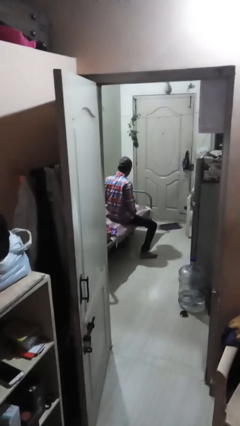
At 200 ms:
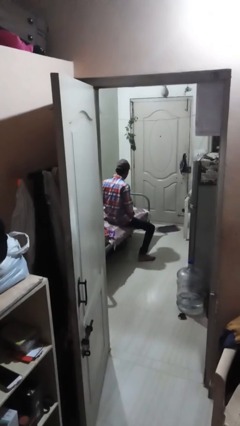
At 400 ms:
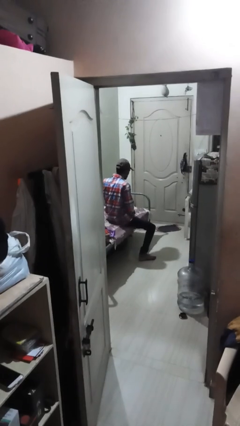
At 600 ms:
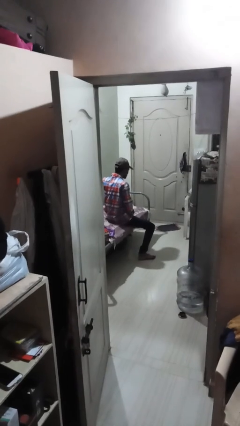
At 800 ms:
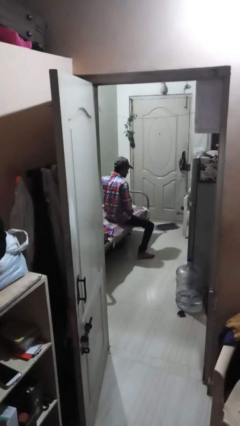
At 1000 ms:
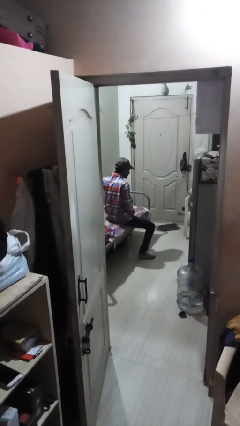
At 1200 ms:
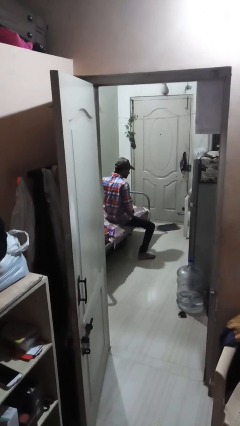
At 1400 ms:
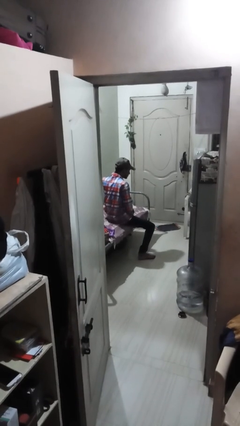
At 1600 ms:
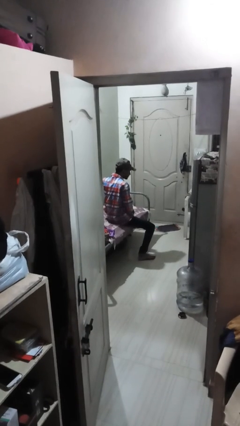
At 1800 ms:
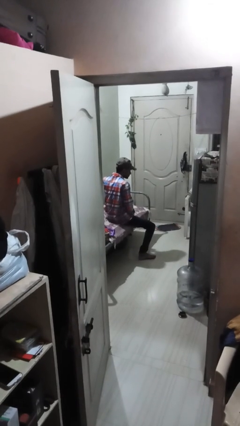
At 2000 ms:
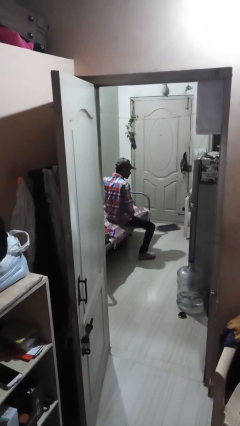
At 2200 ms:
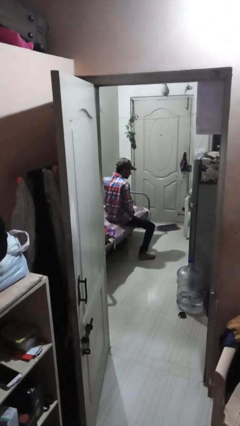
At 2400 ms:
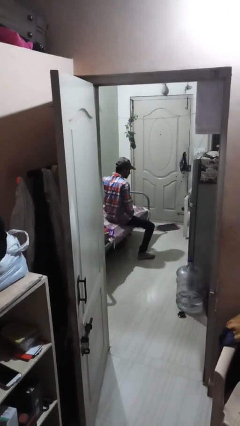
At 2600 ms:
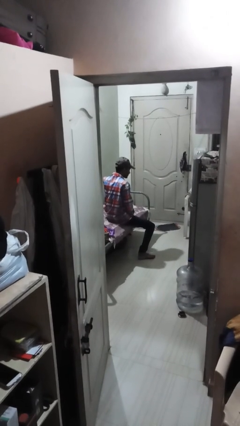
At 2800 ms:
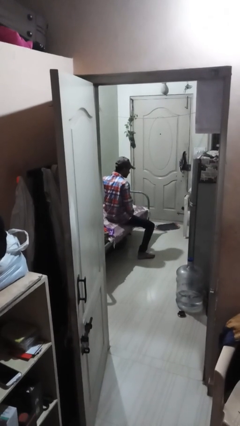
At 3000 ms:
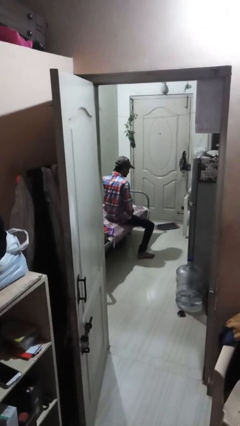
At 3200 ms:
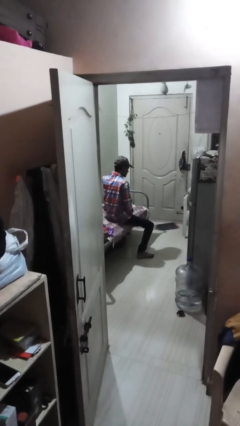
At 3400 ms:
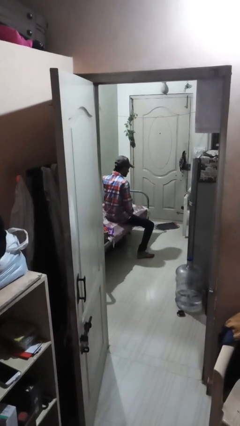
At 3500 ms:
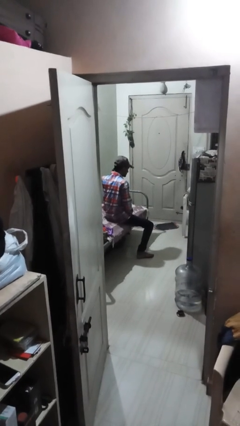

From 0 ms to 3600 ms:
person touches earlobe

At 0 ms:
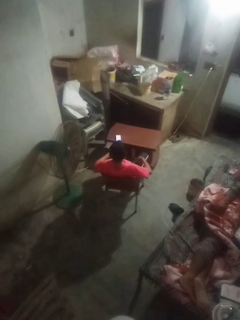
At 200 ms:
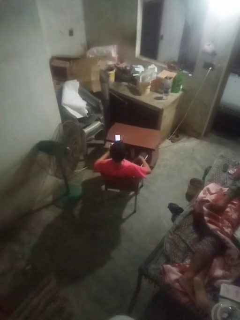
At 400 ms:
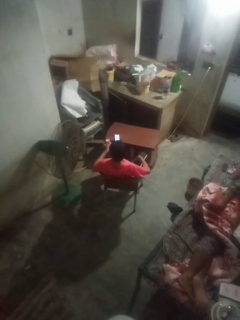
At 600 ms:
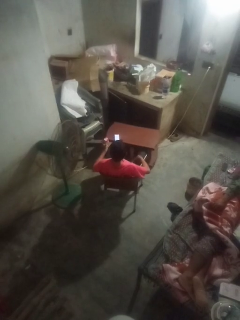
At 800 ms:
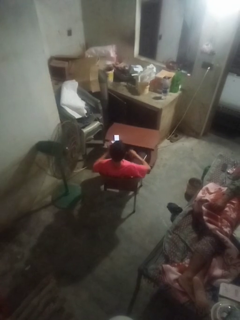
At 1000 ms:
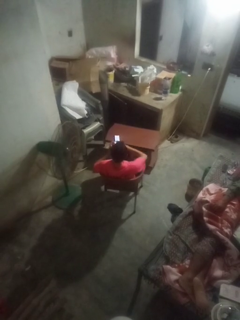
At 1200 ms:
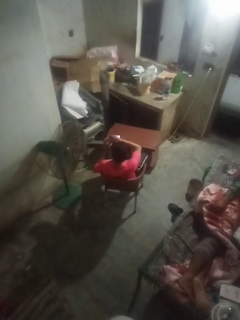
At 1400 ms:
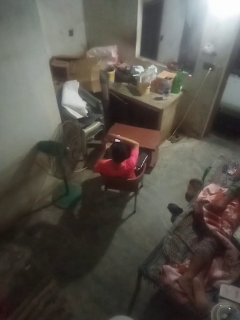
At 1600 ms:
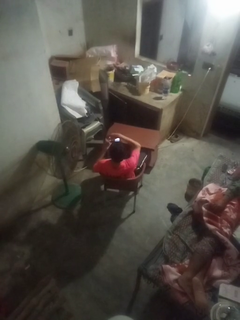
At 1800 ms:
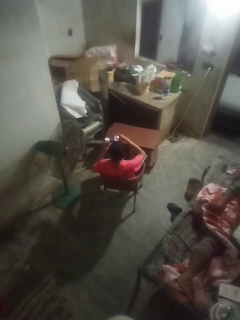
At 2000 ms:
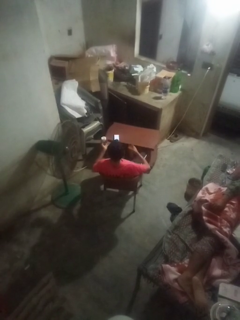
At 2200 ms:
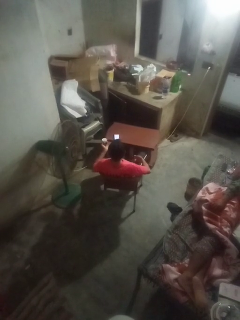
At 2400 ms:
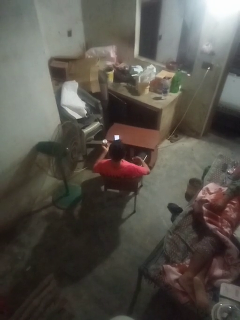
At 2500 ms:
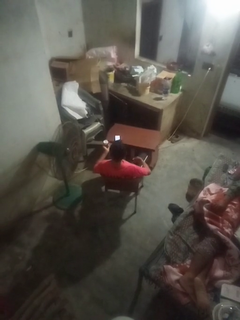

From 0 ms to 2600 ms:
person opens jar

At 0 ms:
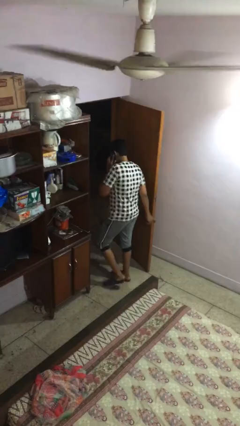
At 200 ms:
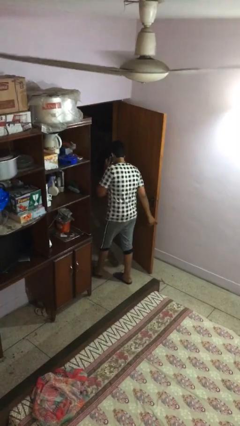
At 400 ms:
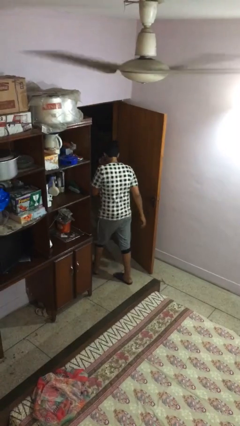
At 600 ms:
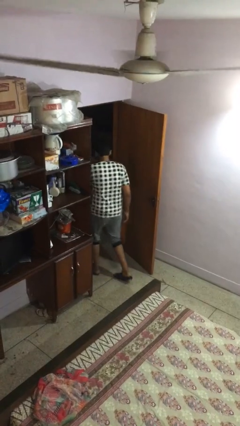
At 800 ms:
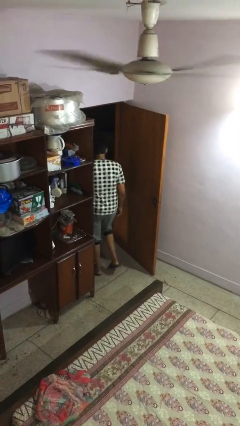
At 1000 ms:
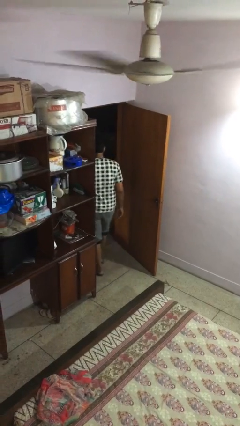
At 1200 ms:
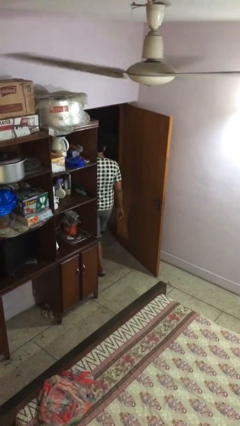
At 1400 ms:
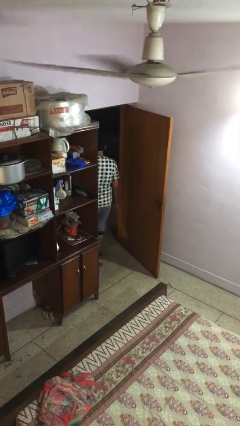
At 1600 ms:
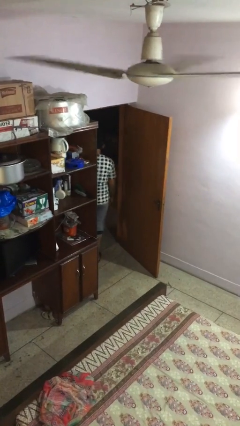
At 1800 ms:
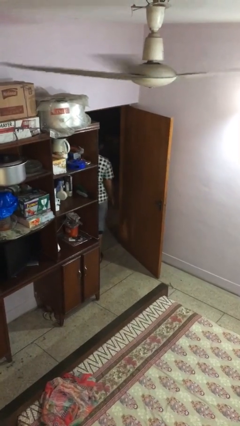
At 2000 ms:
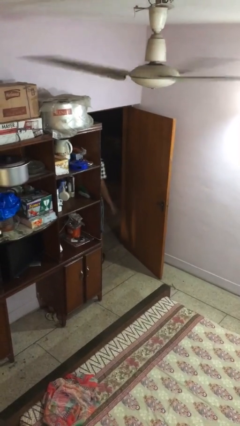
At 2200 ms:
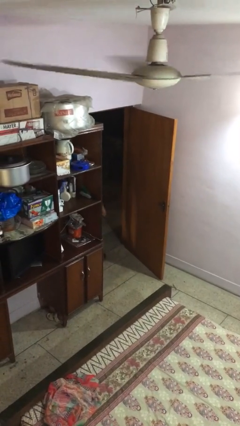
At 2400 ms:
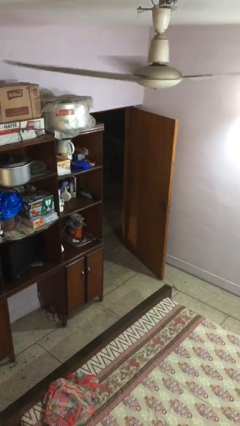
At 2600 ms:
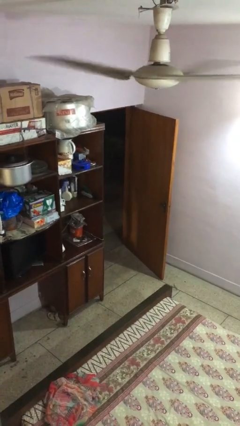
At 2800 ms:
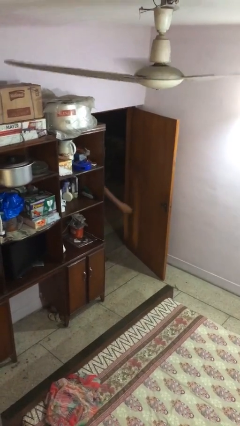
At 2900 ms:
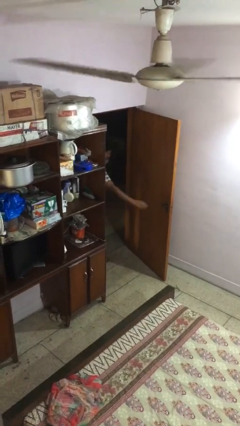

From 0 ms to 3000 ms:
person exits scene through structure

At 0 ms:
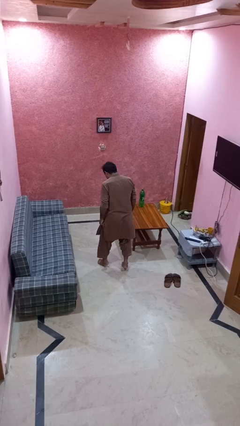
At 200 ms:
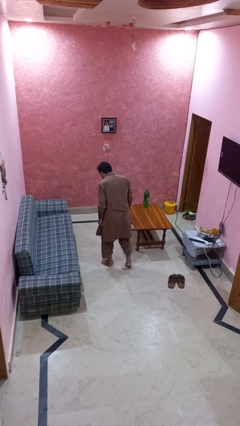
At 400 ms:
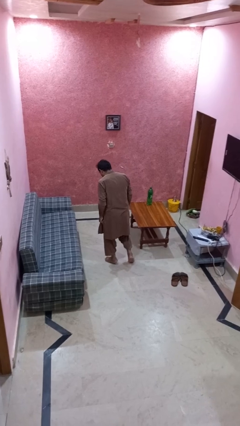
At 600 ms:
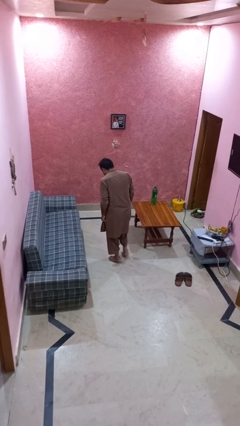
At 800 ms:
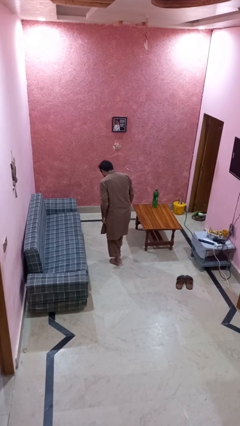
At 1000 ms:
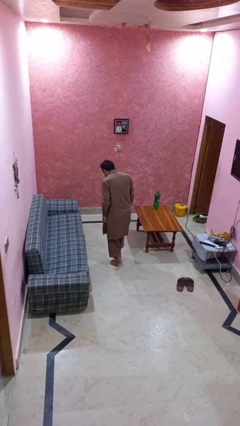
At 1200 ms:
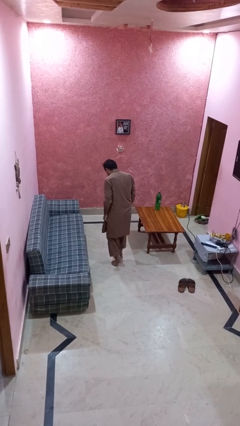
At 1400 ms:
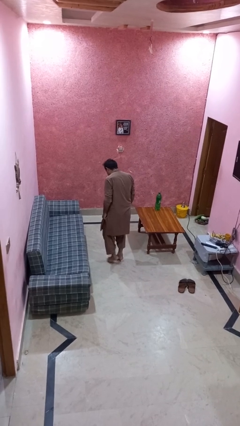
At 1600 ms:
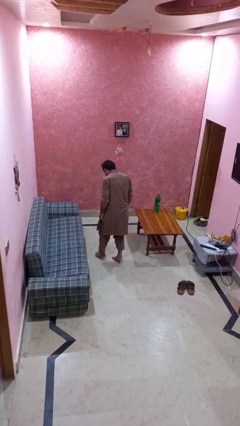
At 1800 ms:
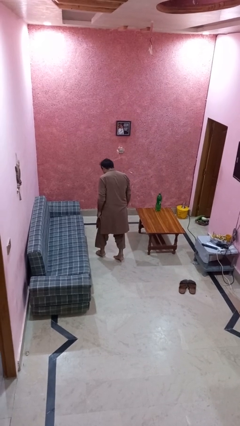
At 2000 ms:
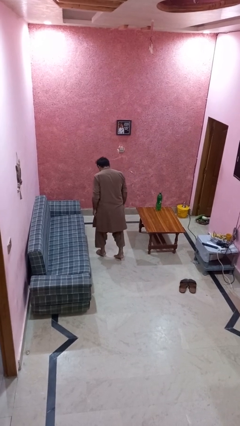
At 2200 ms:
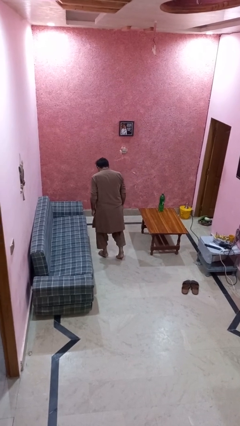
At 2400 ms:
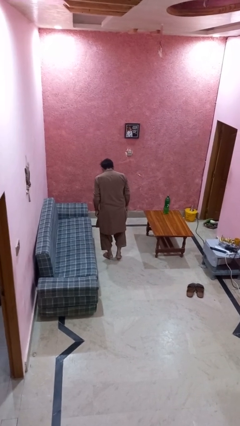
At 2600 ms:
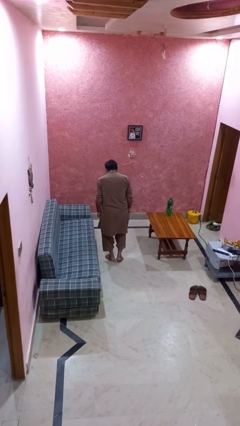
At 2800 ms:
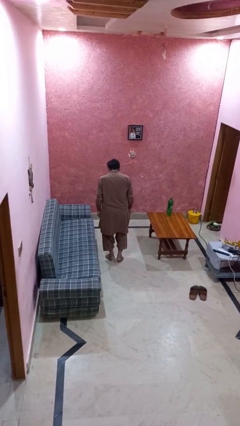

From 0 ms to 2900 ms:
person walks tiptoe

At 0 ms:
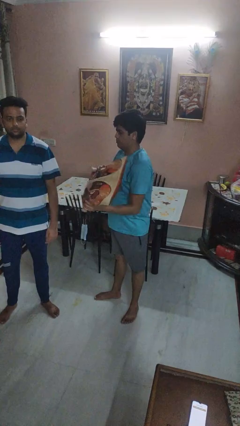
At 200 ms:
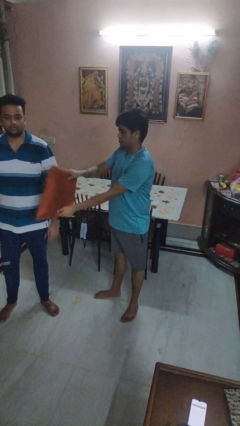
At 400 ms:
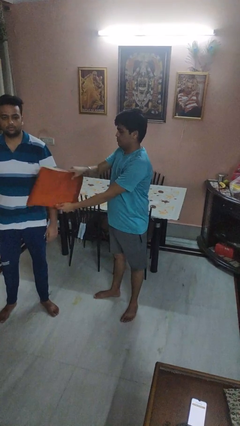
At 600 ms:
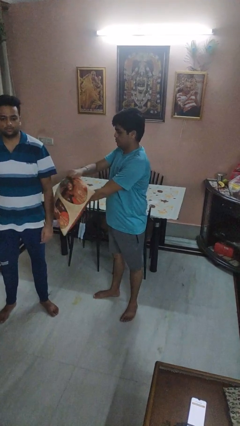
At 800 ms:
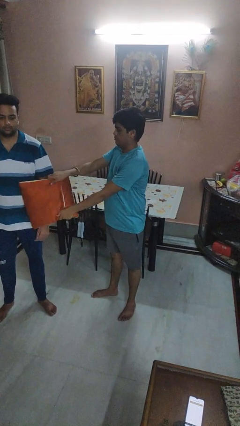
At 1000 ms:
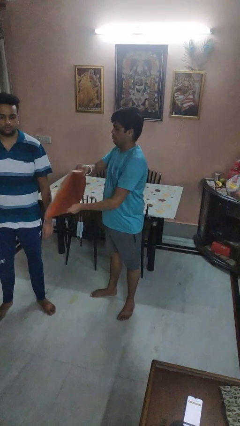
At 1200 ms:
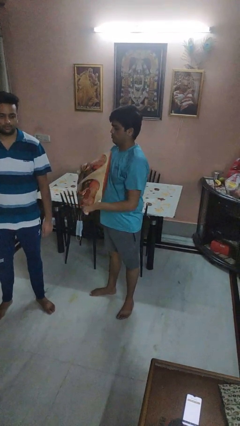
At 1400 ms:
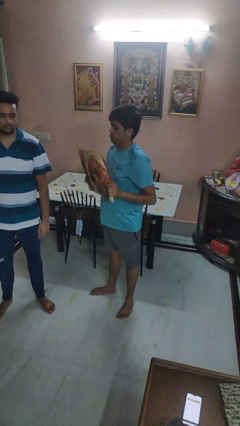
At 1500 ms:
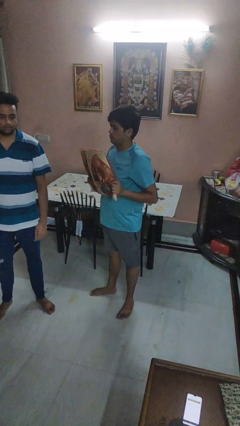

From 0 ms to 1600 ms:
person hits person with pillow

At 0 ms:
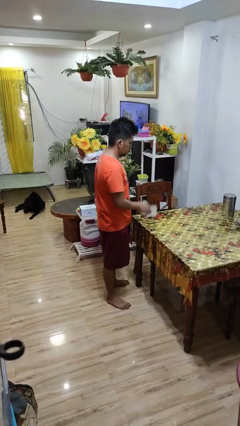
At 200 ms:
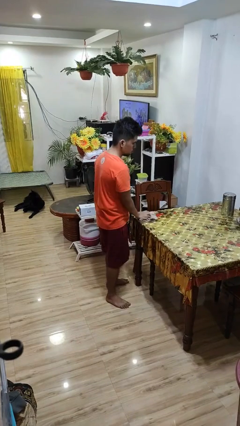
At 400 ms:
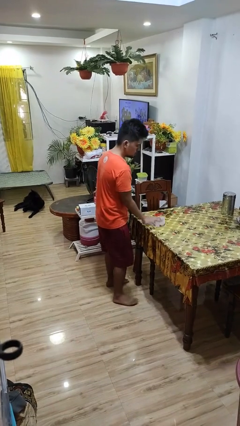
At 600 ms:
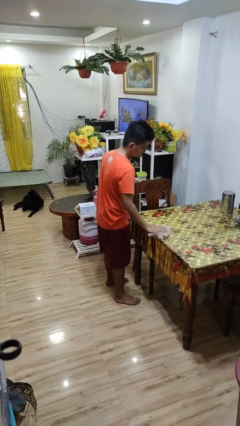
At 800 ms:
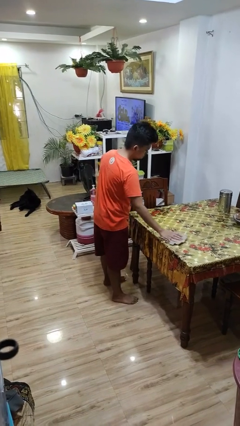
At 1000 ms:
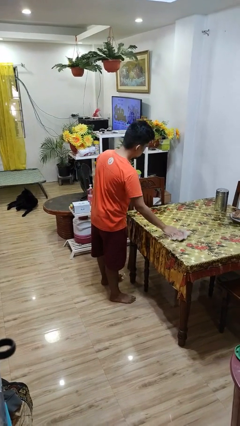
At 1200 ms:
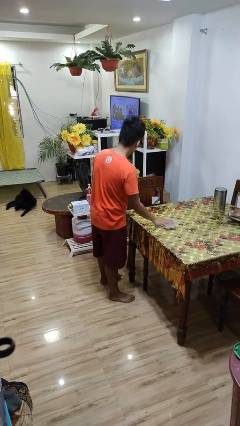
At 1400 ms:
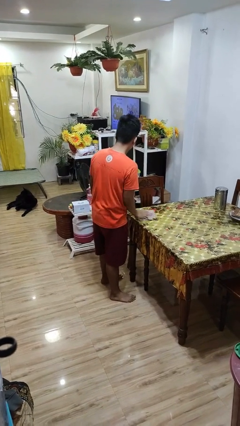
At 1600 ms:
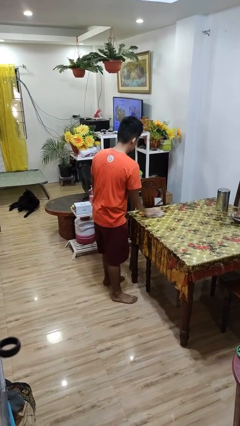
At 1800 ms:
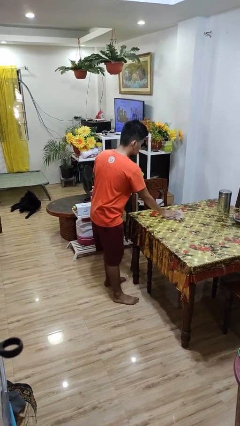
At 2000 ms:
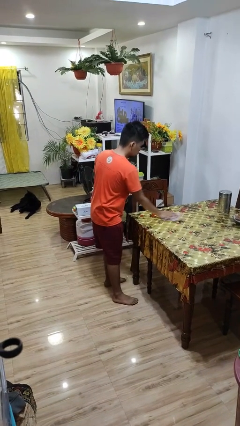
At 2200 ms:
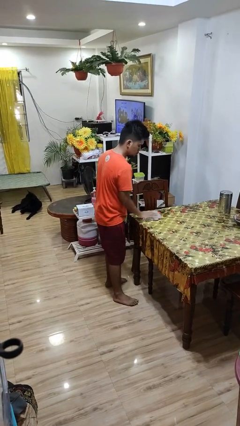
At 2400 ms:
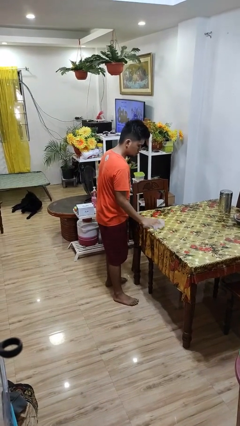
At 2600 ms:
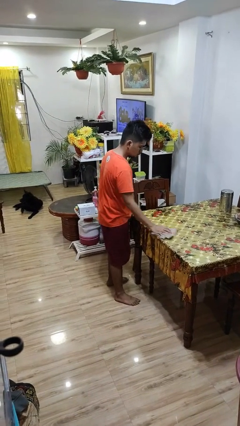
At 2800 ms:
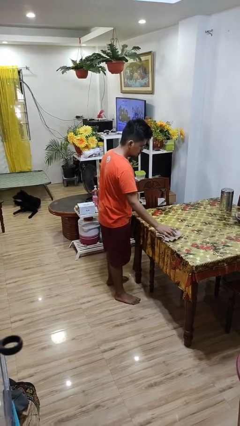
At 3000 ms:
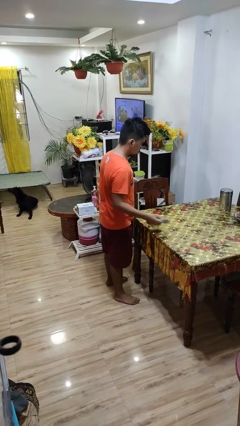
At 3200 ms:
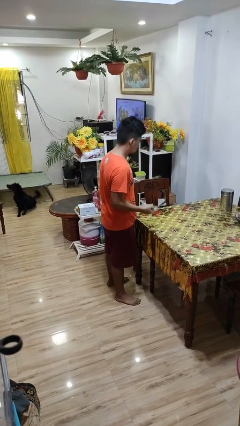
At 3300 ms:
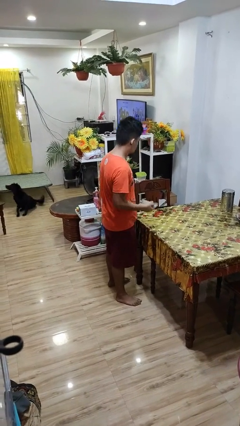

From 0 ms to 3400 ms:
person cleans table with rag

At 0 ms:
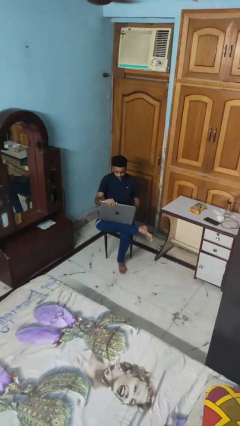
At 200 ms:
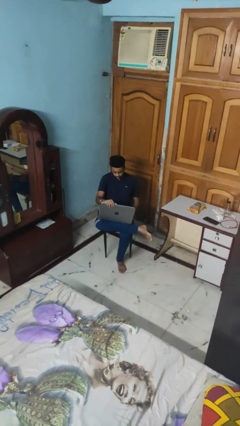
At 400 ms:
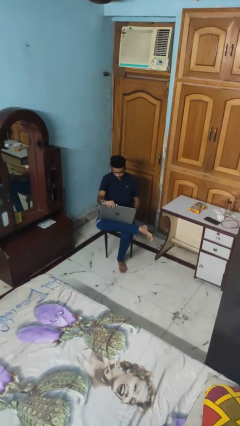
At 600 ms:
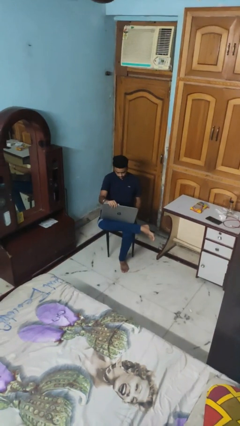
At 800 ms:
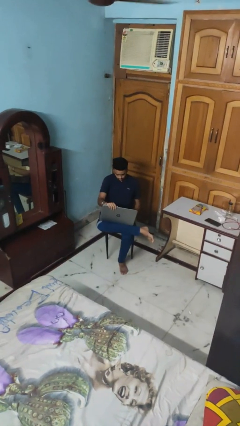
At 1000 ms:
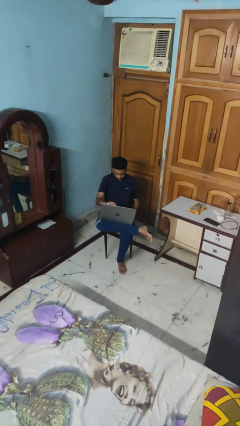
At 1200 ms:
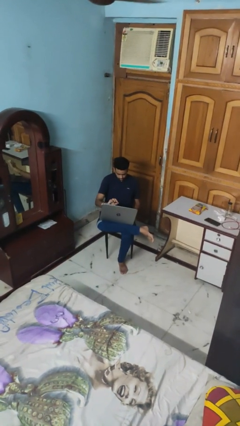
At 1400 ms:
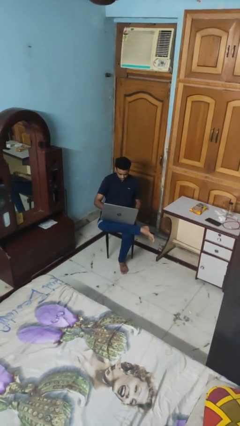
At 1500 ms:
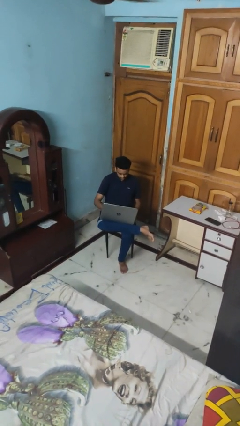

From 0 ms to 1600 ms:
person opens laptop
